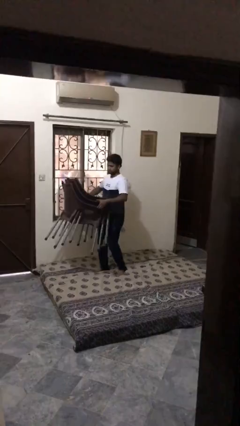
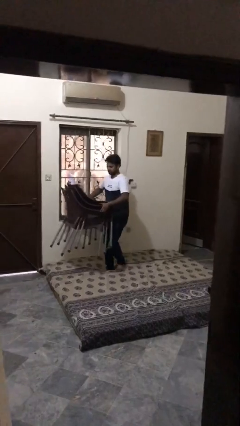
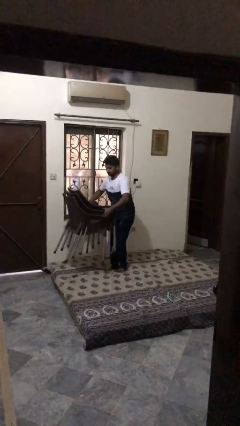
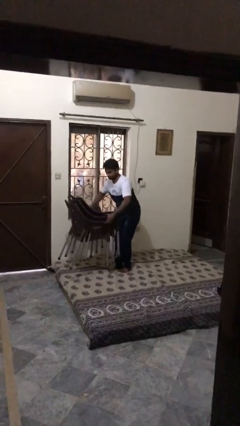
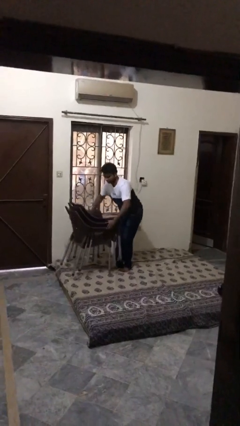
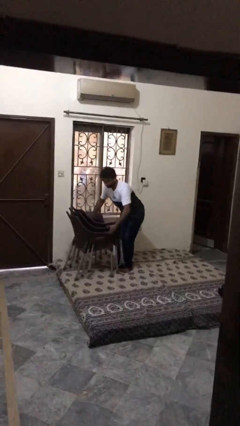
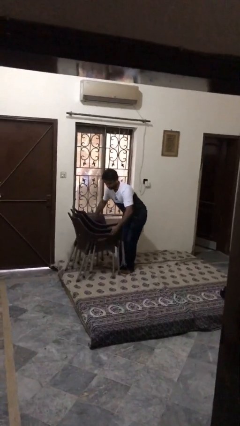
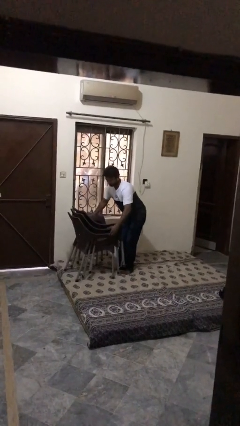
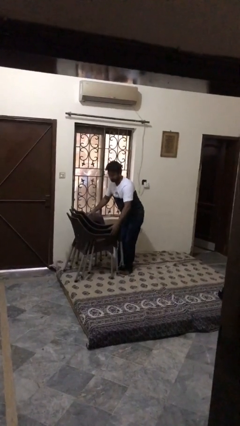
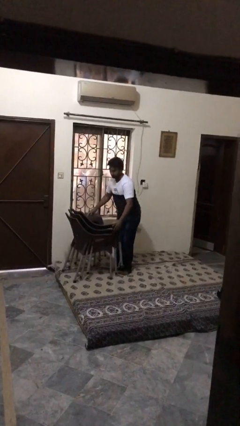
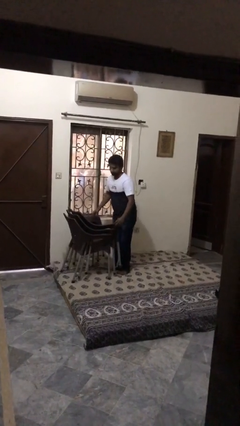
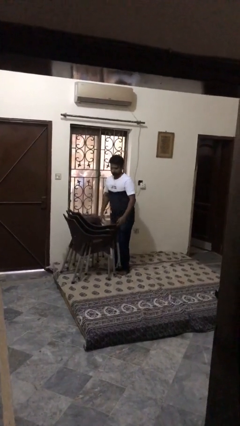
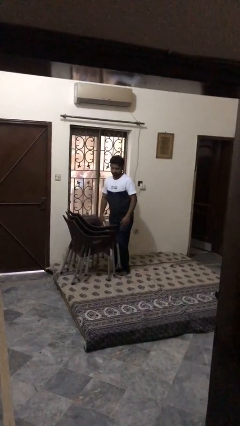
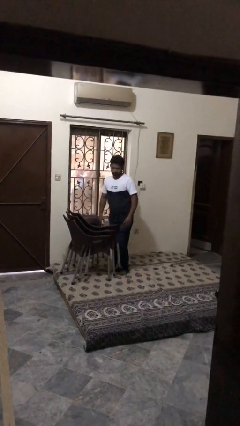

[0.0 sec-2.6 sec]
person puts down object on floor

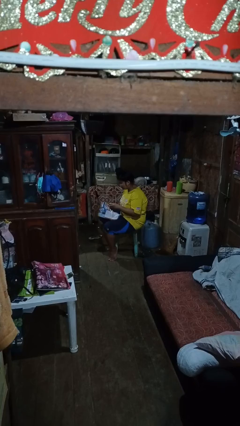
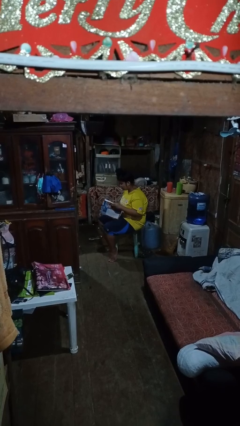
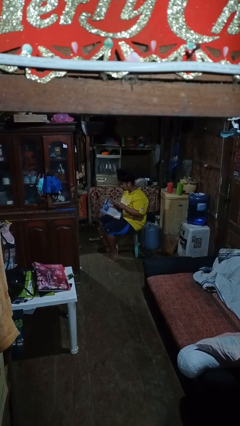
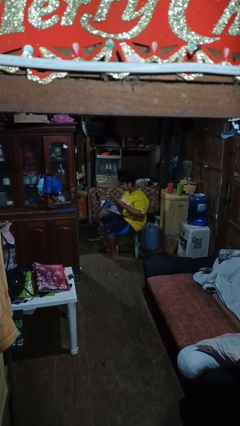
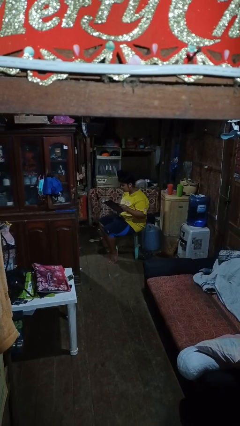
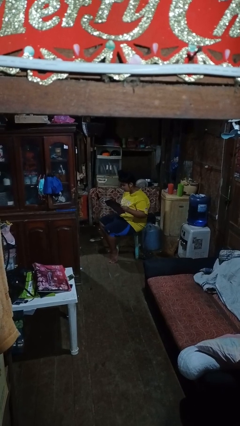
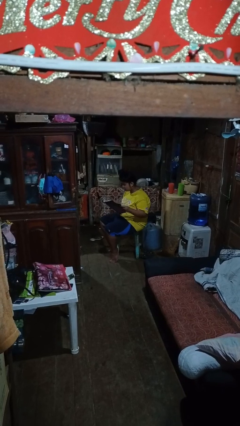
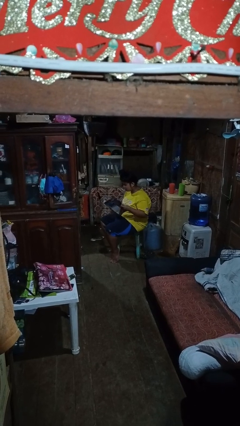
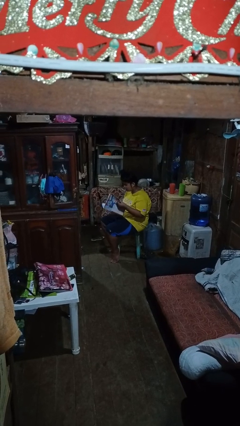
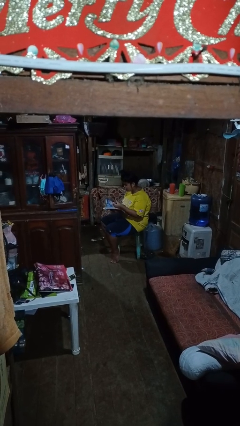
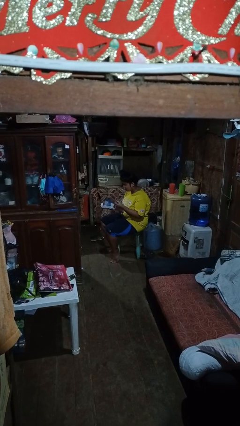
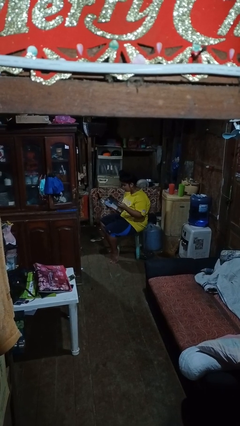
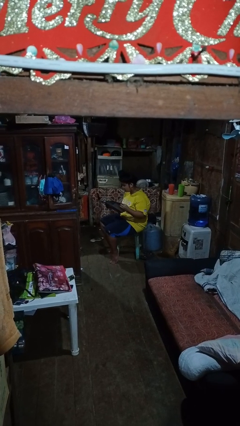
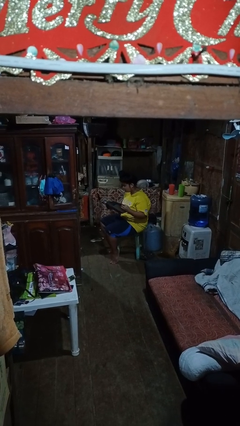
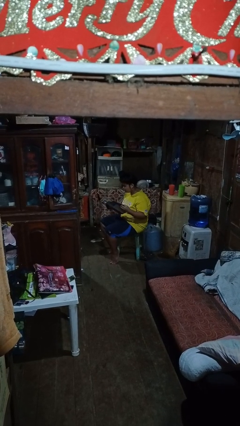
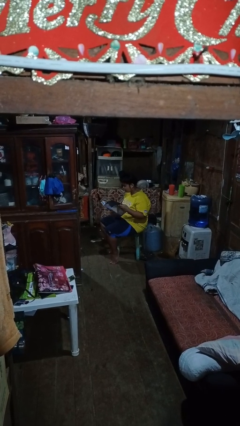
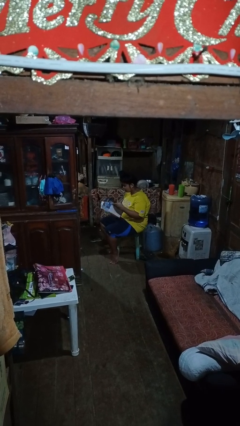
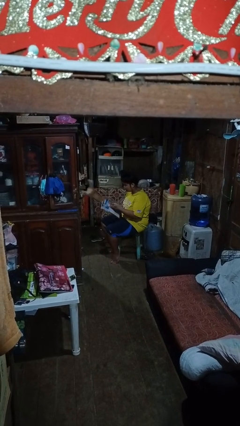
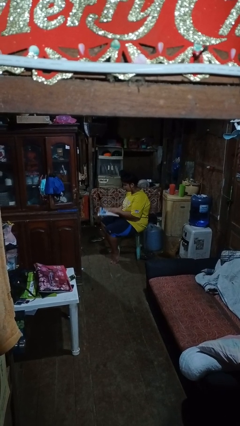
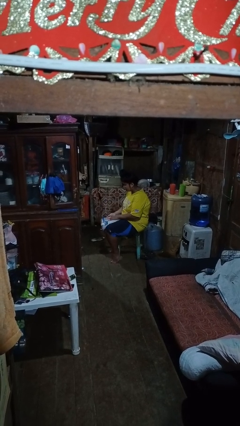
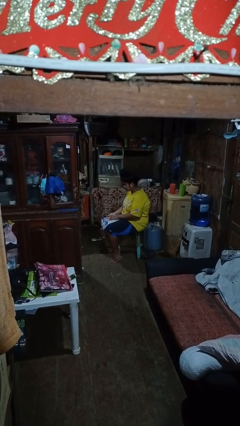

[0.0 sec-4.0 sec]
person reads magazine

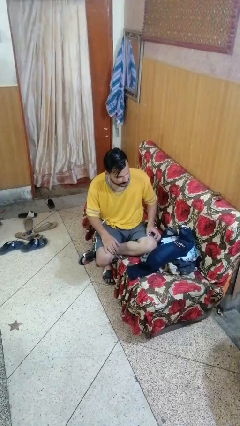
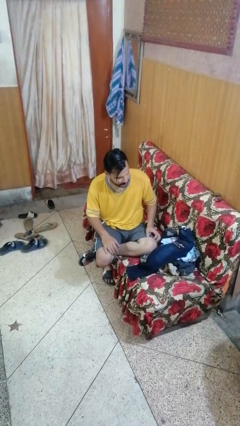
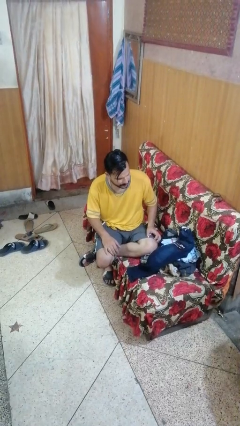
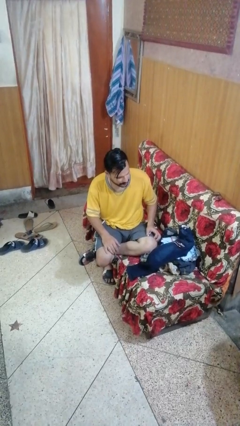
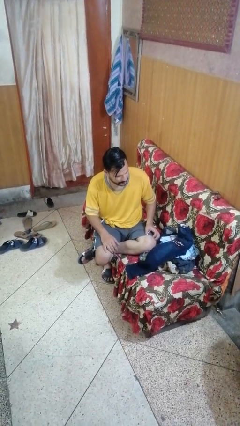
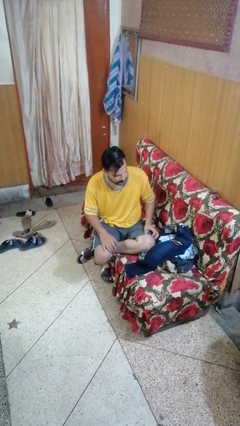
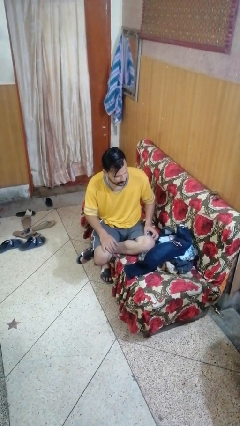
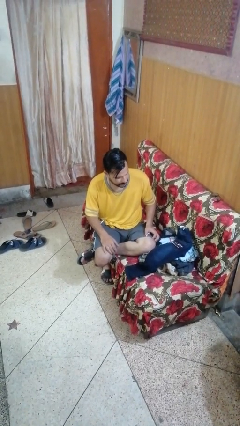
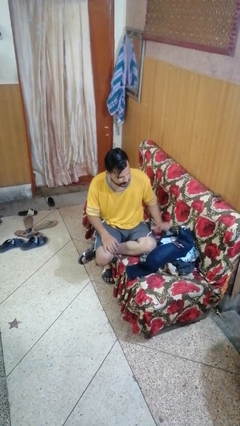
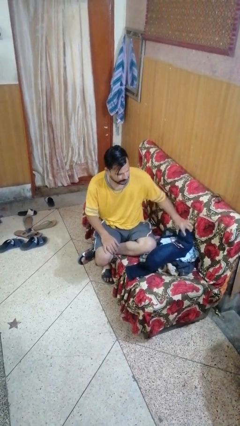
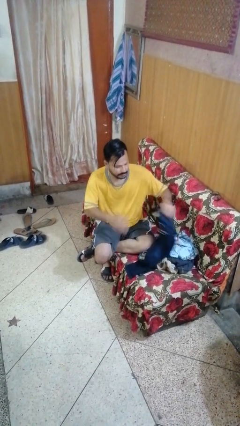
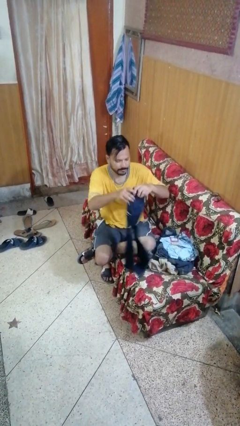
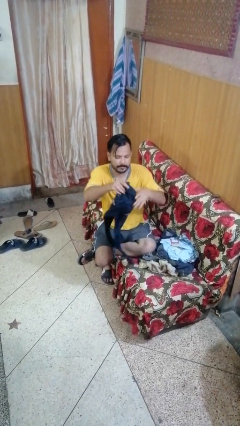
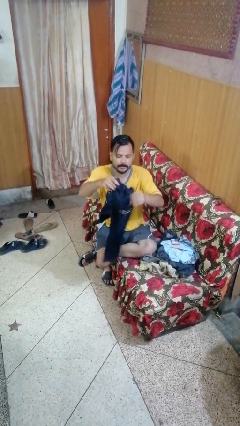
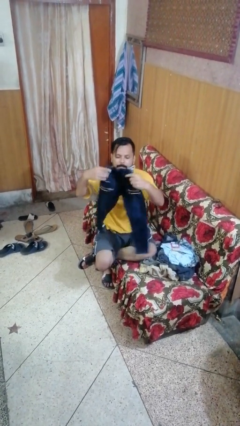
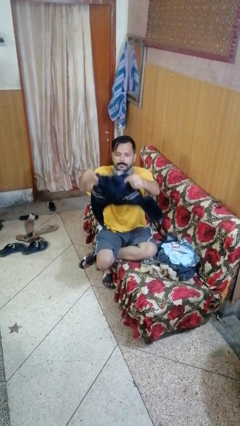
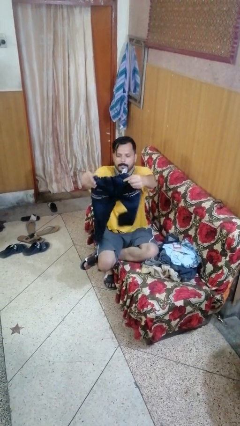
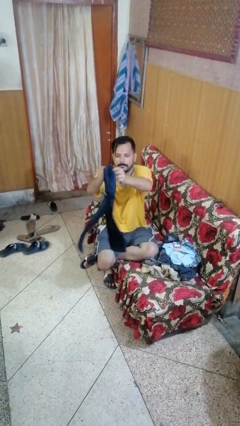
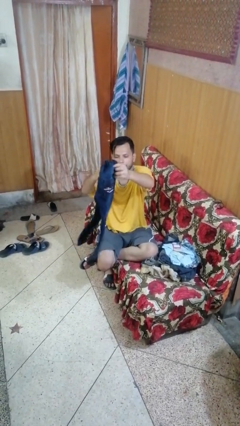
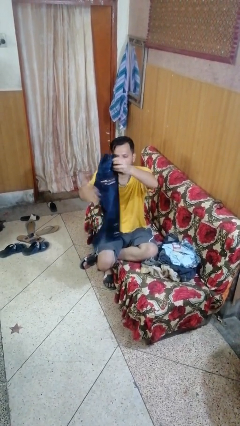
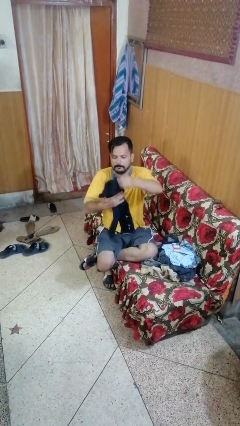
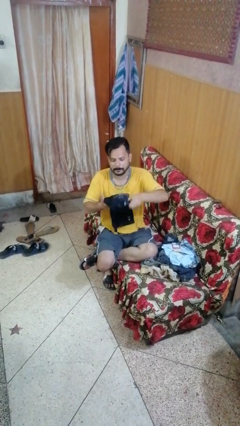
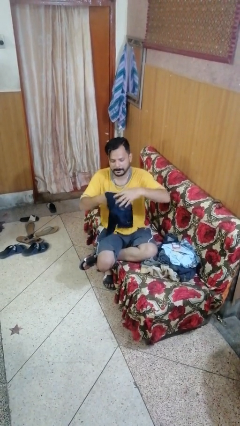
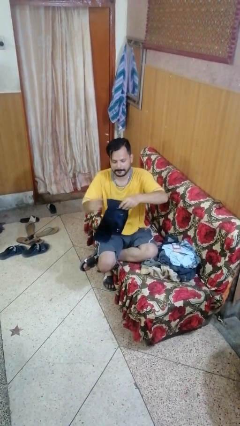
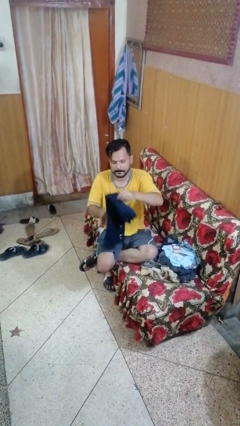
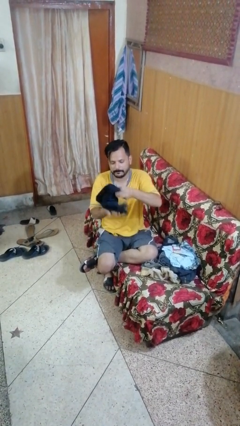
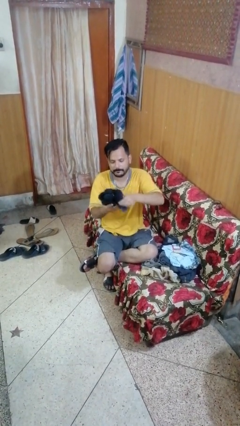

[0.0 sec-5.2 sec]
person folds pants

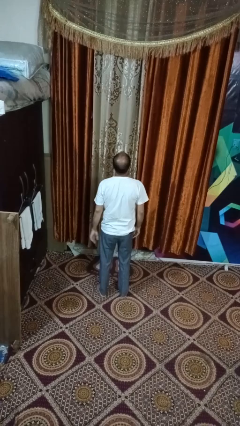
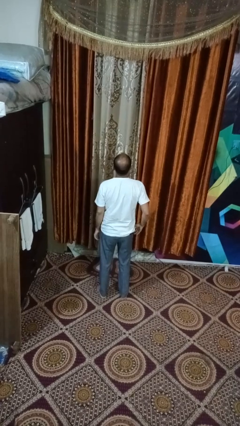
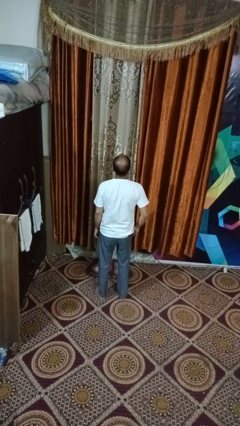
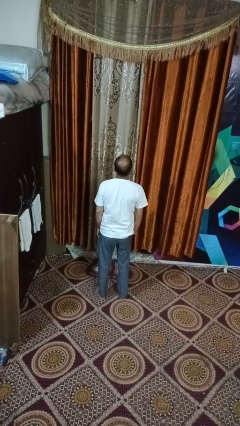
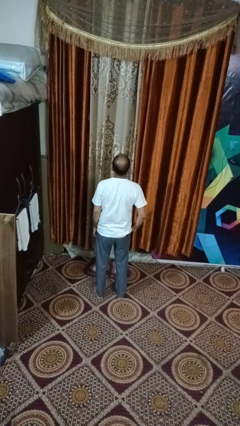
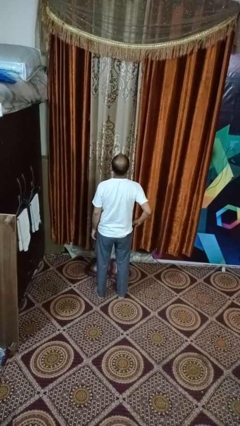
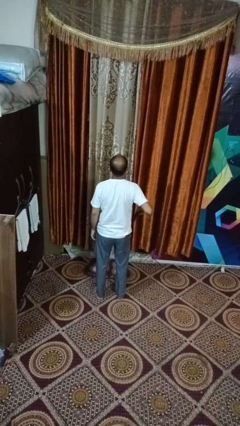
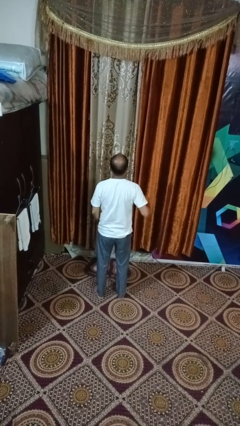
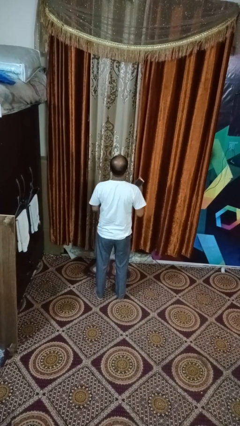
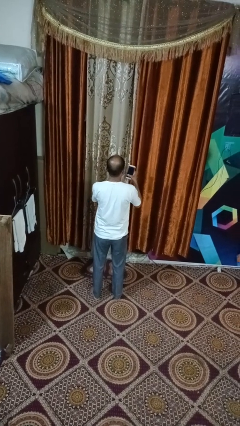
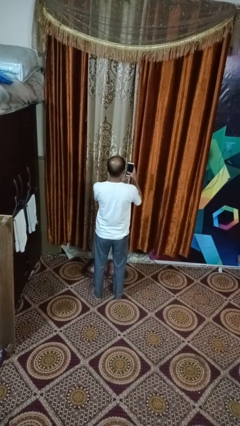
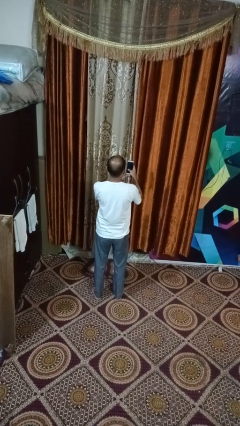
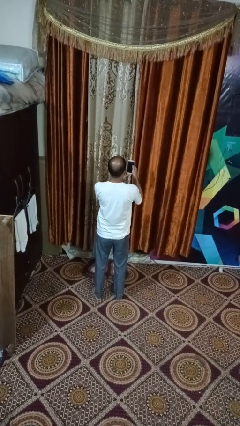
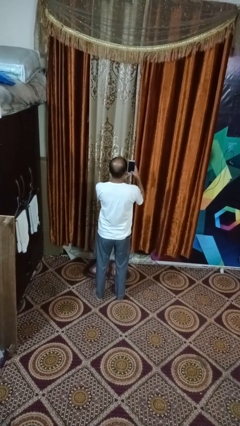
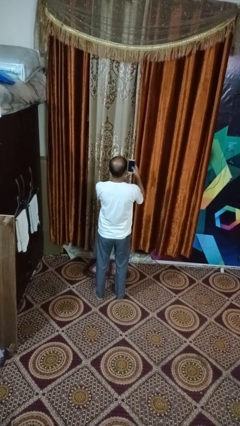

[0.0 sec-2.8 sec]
person takes phone from pocket

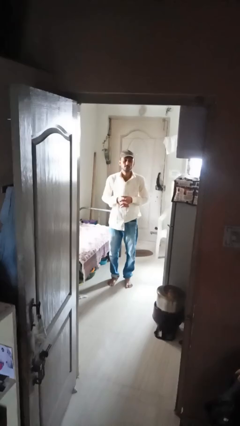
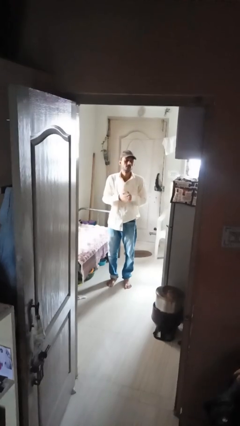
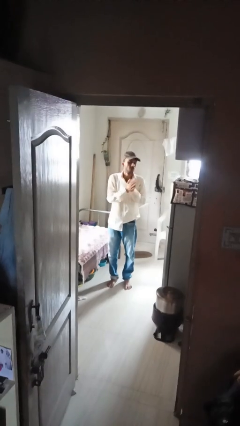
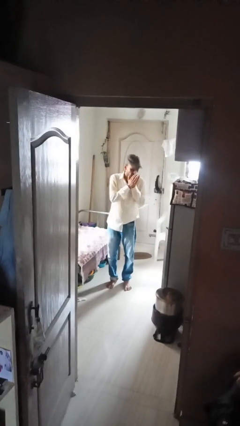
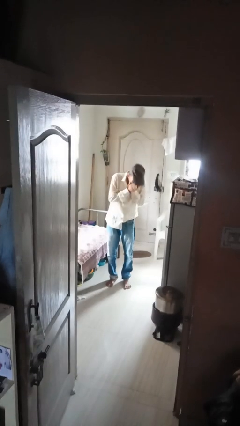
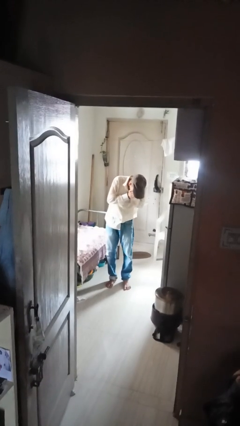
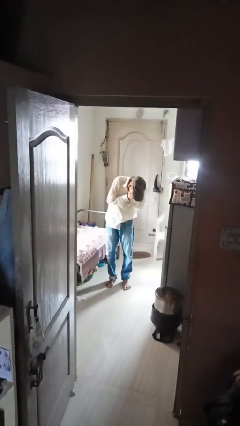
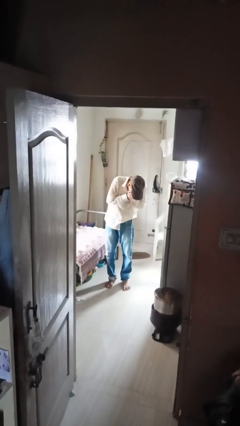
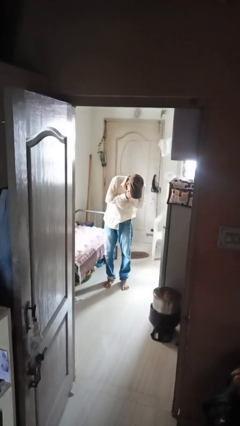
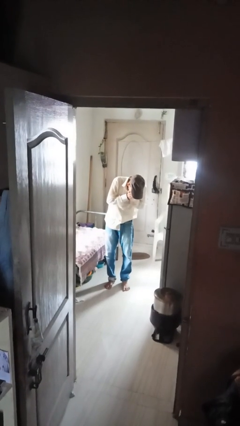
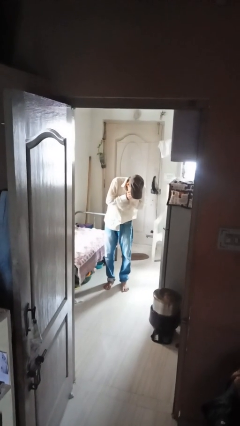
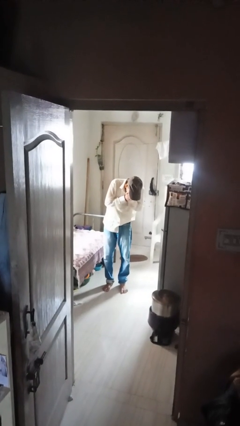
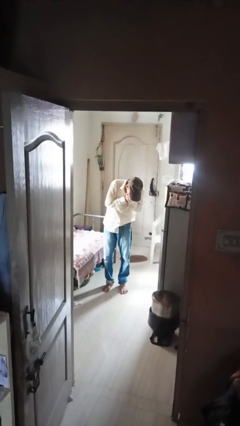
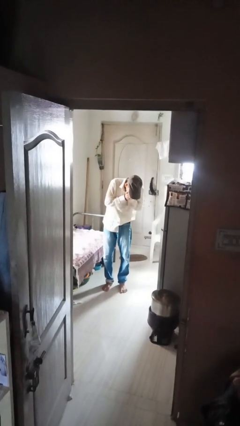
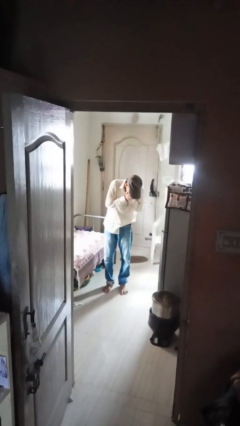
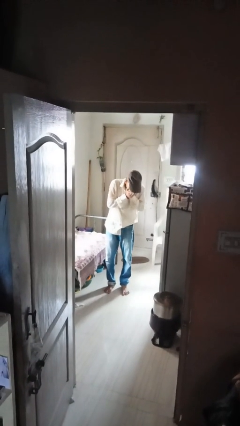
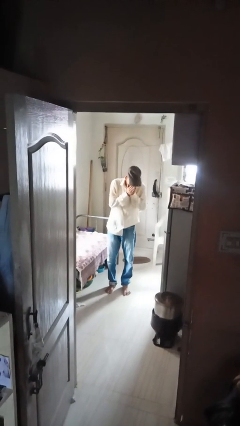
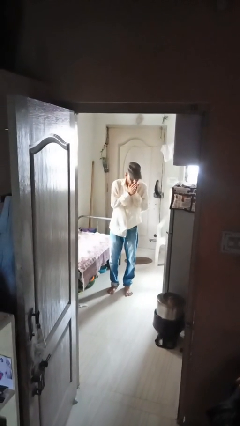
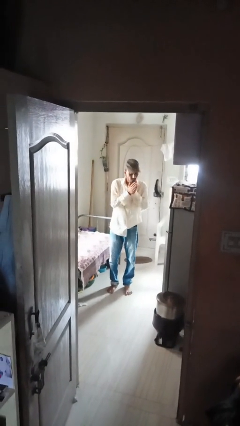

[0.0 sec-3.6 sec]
person sneezes into hand
